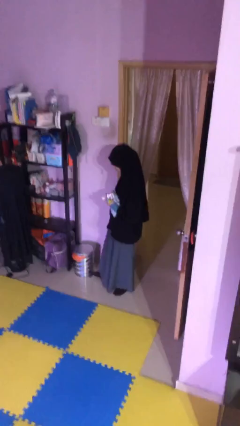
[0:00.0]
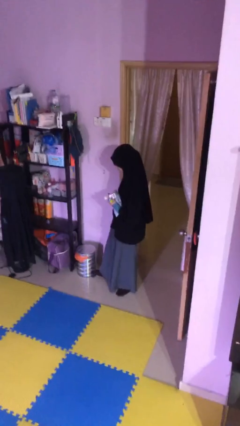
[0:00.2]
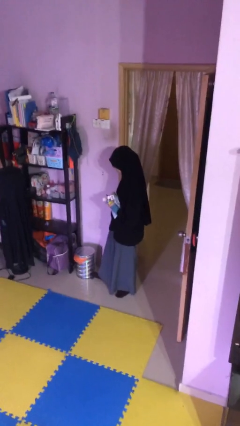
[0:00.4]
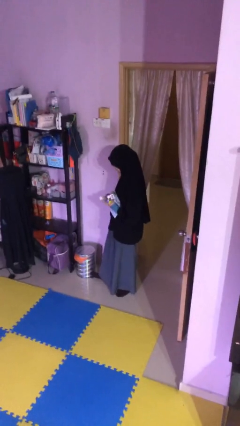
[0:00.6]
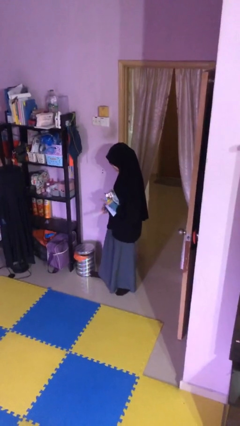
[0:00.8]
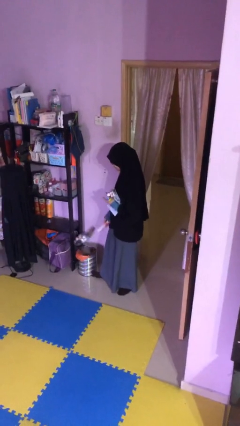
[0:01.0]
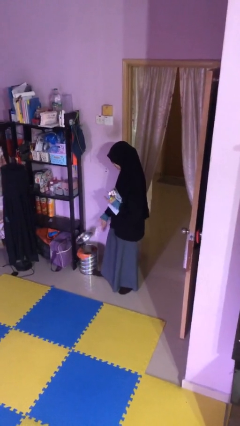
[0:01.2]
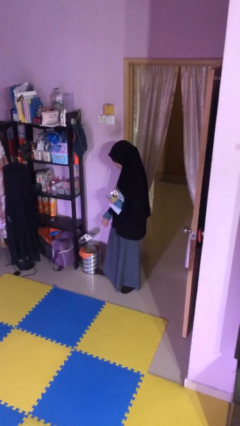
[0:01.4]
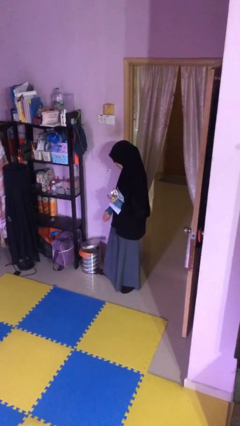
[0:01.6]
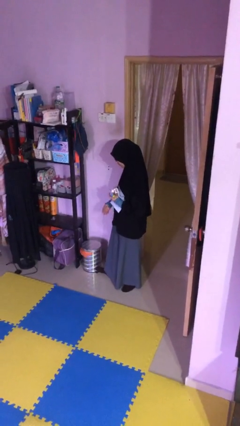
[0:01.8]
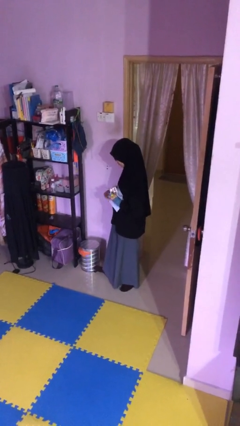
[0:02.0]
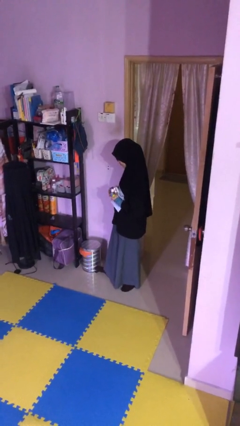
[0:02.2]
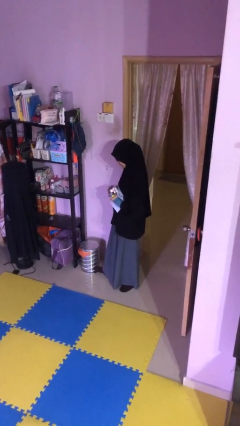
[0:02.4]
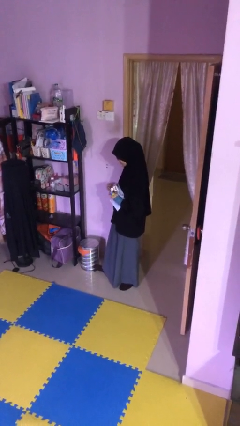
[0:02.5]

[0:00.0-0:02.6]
person discards trash

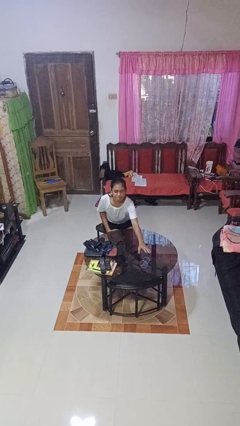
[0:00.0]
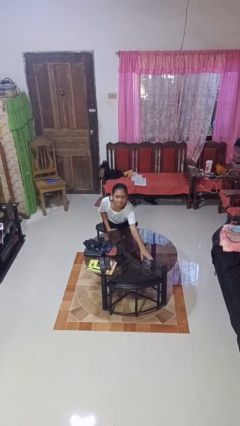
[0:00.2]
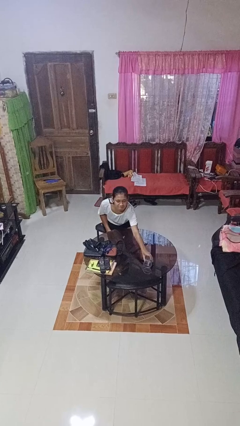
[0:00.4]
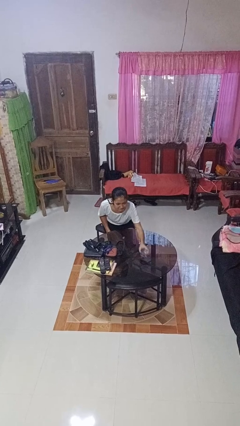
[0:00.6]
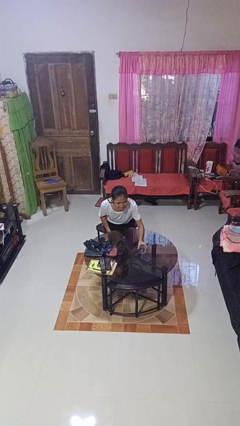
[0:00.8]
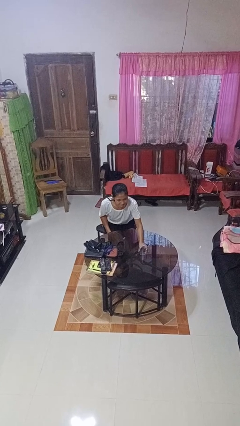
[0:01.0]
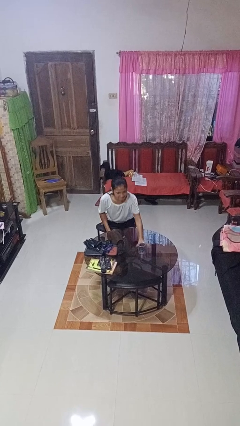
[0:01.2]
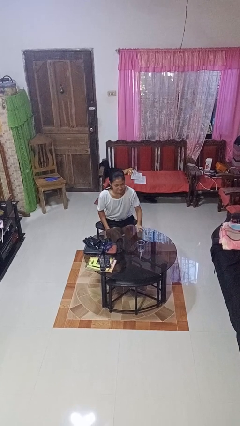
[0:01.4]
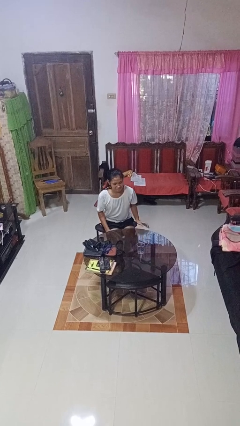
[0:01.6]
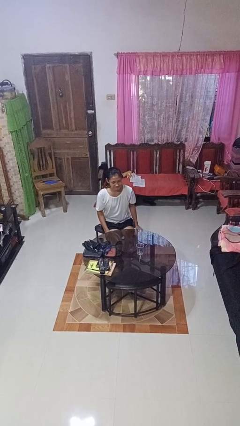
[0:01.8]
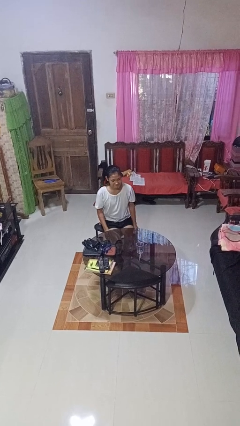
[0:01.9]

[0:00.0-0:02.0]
person sets upright glass

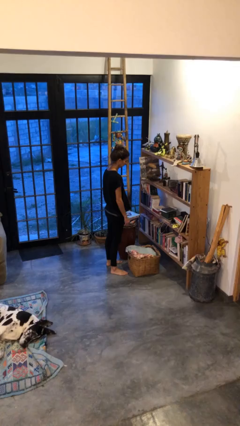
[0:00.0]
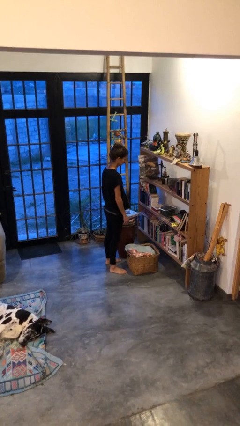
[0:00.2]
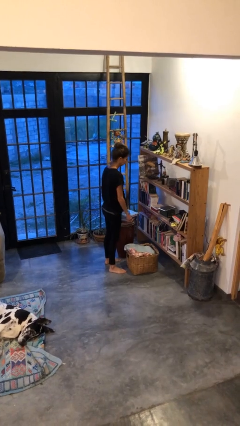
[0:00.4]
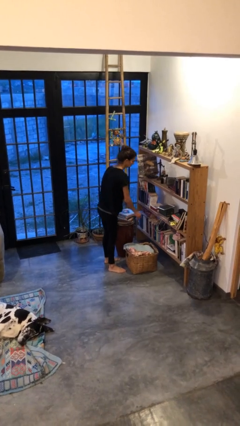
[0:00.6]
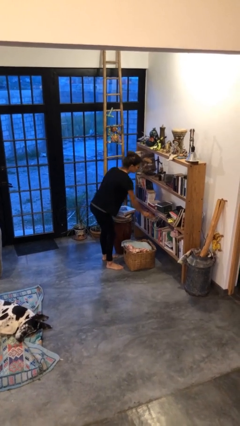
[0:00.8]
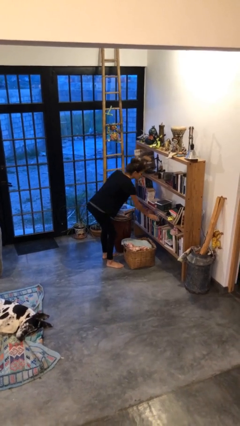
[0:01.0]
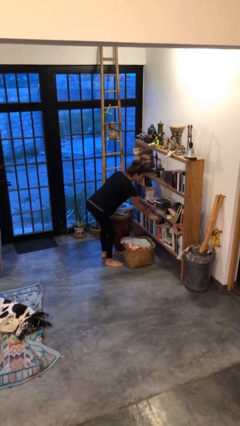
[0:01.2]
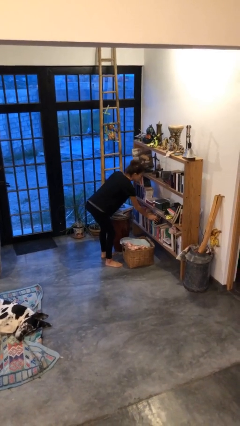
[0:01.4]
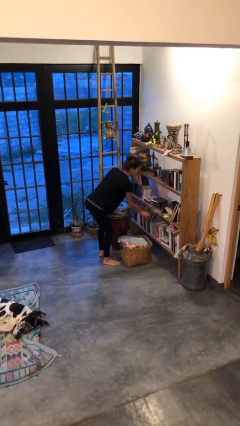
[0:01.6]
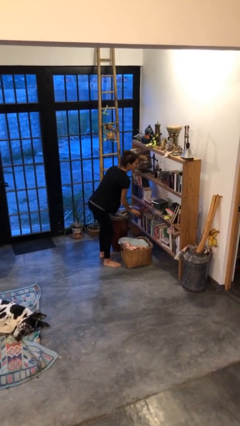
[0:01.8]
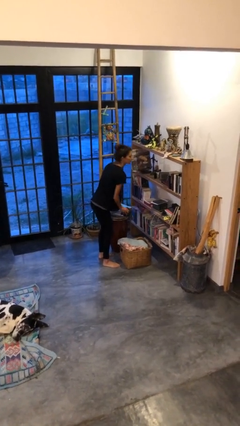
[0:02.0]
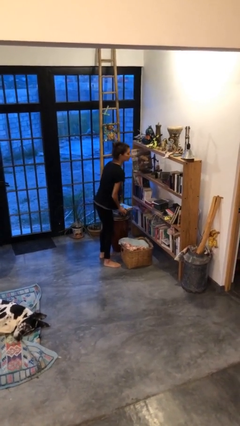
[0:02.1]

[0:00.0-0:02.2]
person picks up object from cabinet

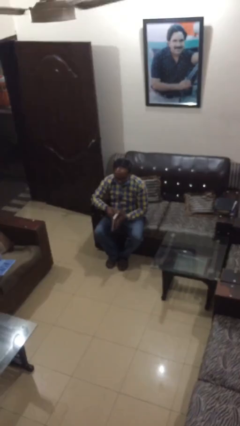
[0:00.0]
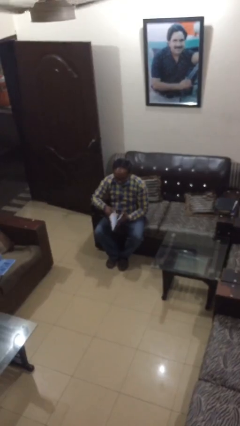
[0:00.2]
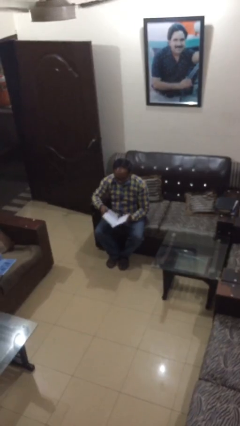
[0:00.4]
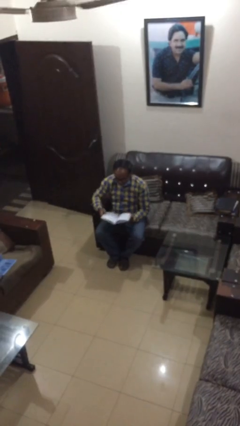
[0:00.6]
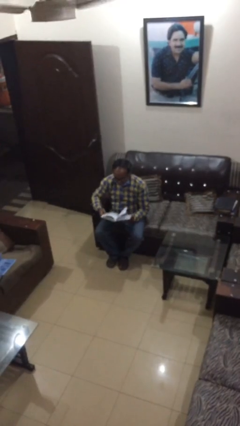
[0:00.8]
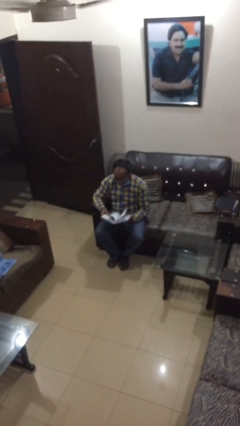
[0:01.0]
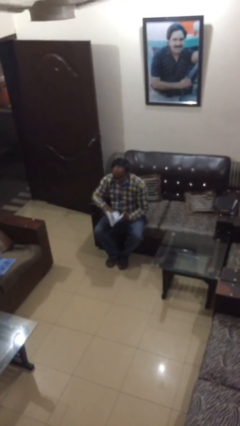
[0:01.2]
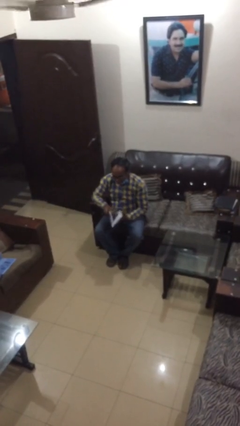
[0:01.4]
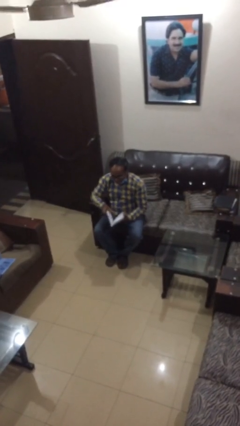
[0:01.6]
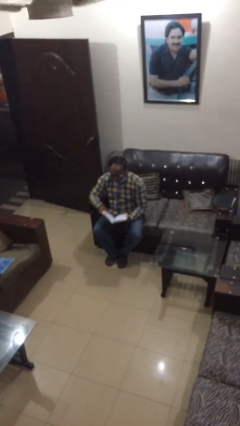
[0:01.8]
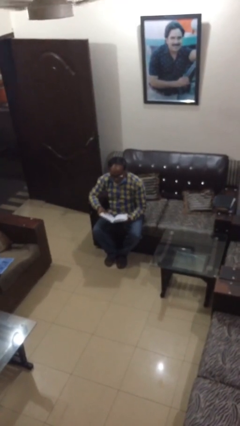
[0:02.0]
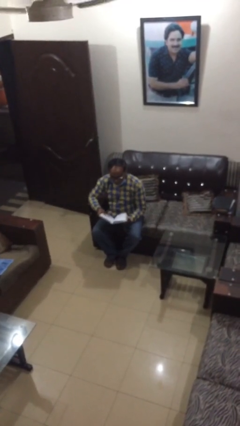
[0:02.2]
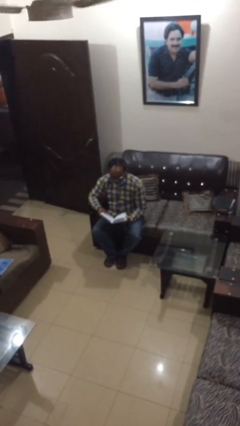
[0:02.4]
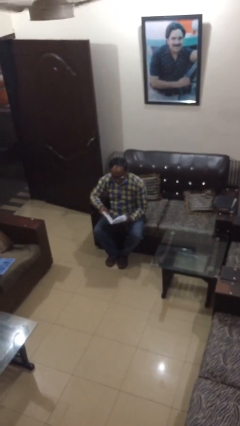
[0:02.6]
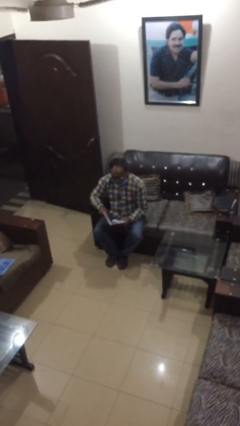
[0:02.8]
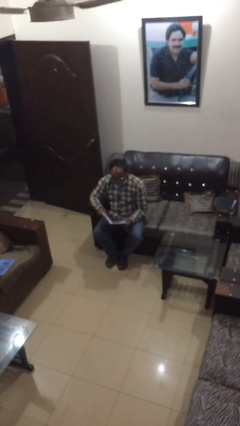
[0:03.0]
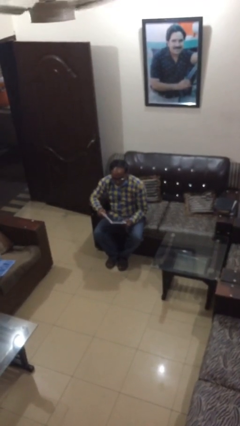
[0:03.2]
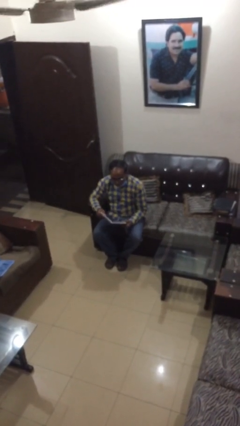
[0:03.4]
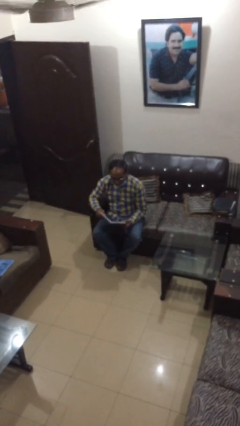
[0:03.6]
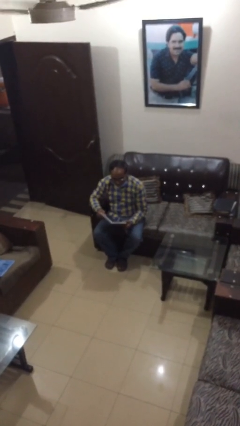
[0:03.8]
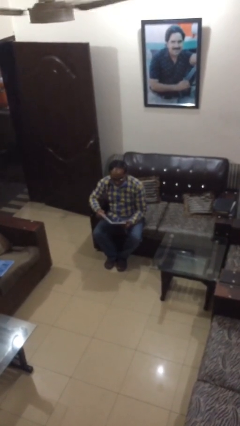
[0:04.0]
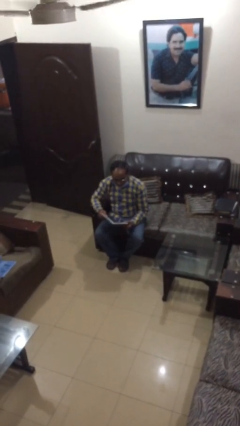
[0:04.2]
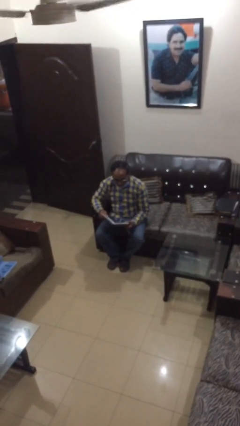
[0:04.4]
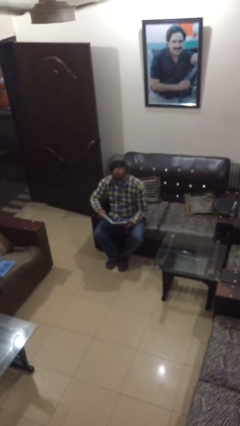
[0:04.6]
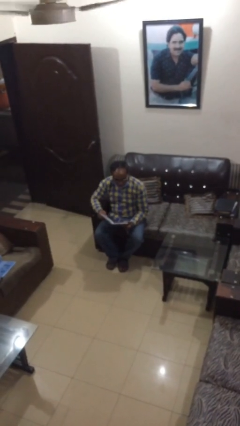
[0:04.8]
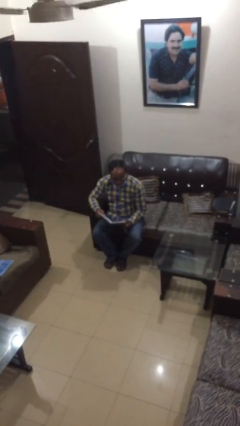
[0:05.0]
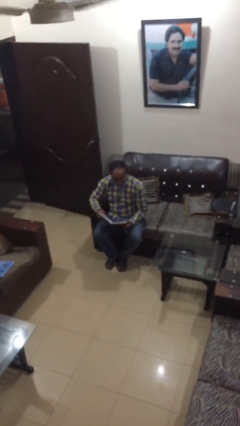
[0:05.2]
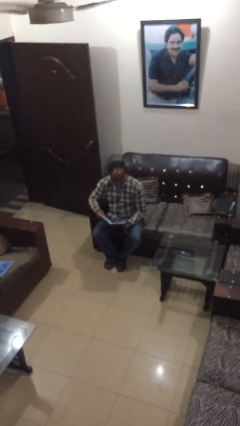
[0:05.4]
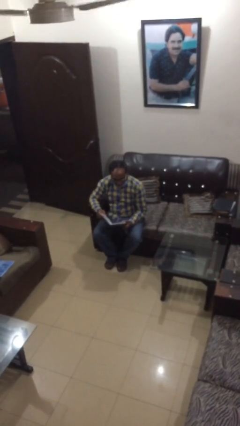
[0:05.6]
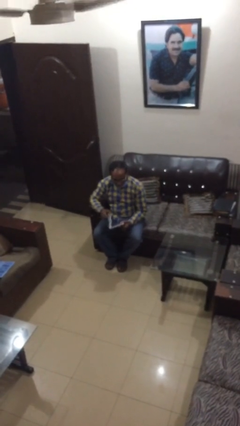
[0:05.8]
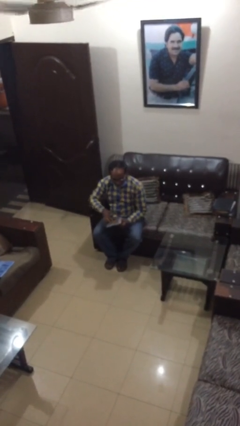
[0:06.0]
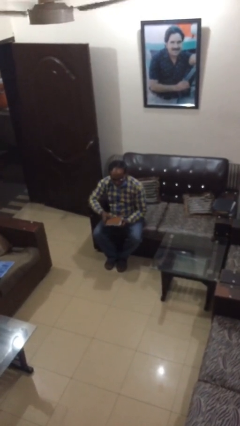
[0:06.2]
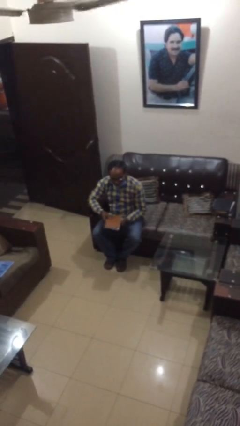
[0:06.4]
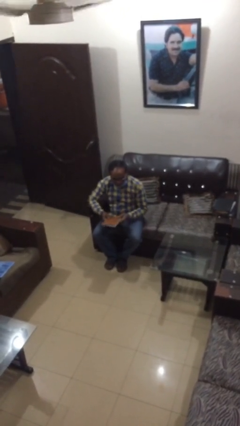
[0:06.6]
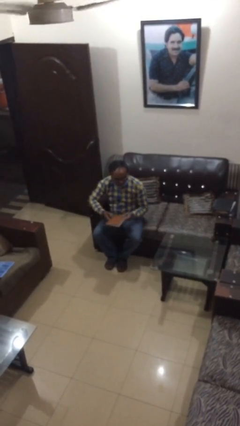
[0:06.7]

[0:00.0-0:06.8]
person reads document

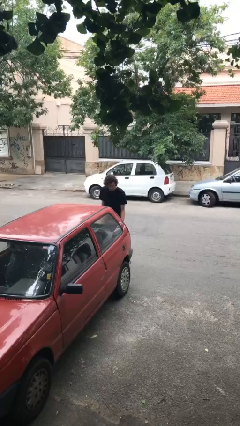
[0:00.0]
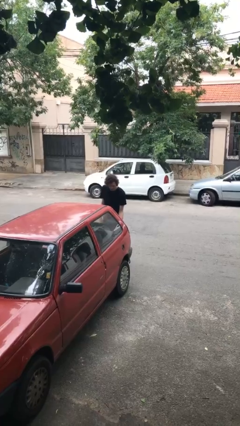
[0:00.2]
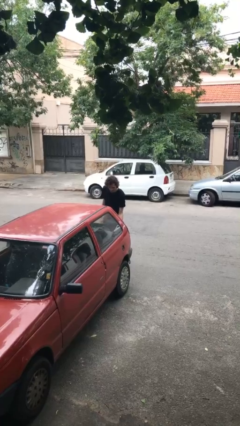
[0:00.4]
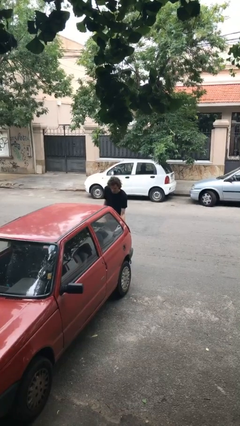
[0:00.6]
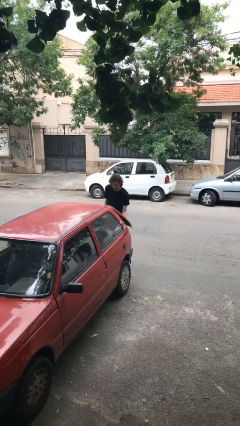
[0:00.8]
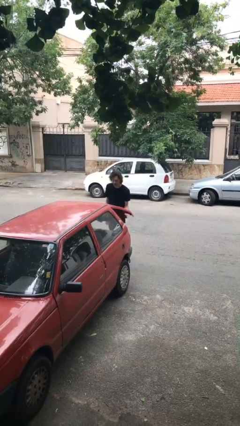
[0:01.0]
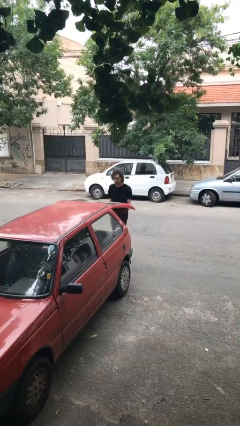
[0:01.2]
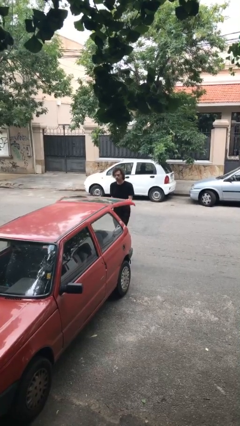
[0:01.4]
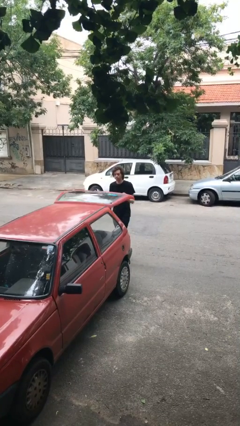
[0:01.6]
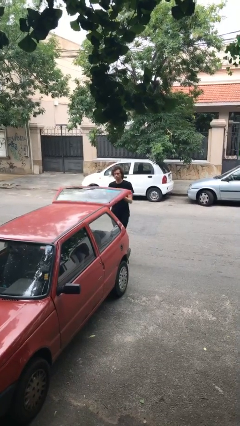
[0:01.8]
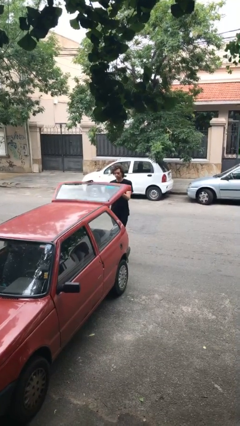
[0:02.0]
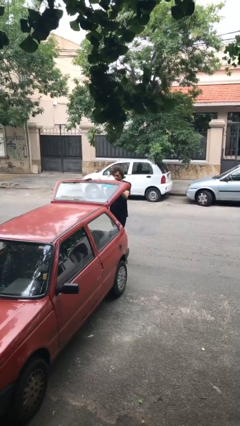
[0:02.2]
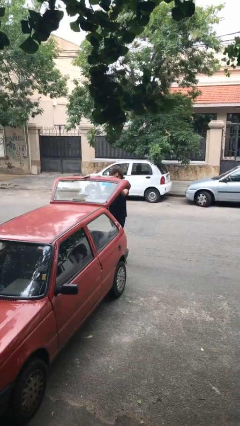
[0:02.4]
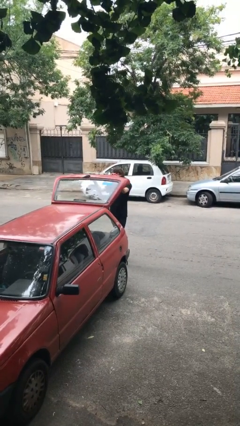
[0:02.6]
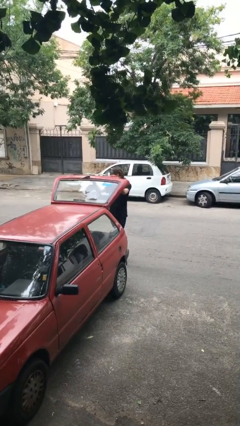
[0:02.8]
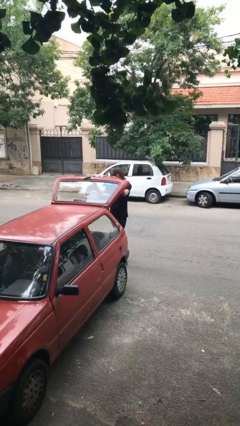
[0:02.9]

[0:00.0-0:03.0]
person opens car trunk

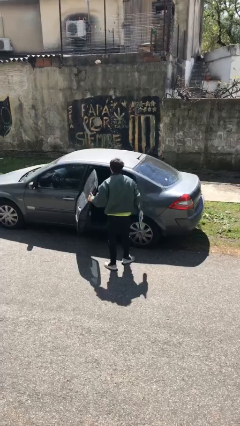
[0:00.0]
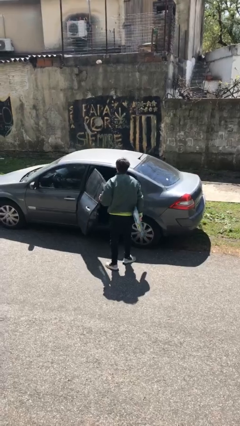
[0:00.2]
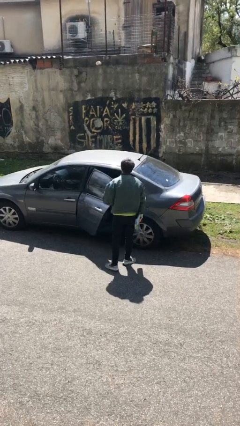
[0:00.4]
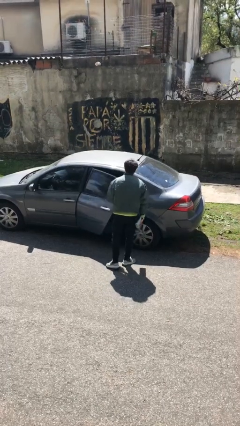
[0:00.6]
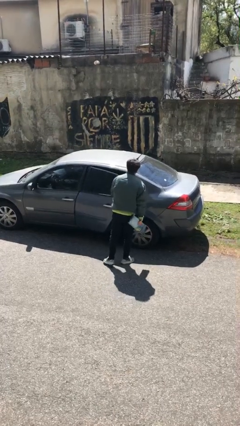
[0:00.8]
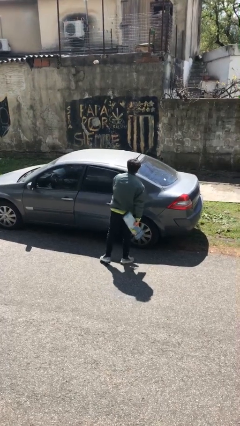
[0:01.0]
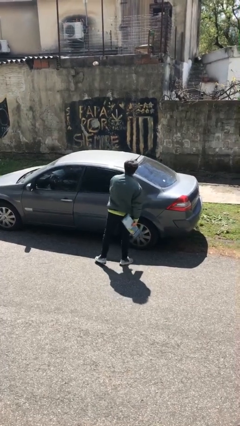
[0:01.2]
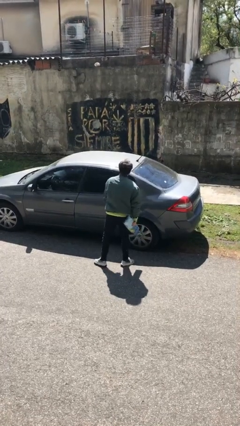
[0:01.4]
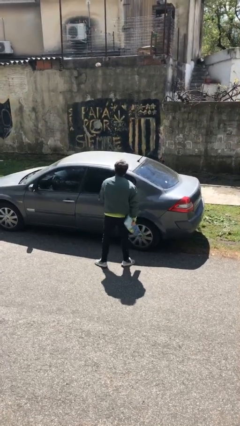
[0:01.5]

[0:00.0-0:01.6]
person closes car door
